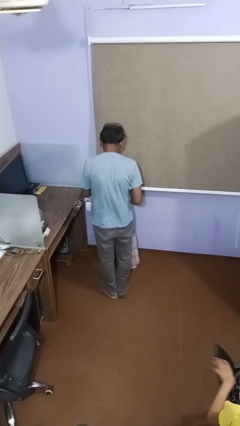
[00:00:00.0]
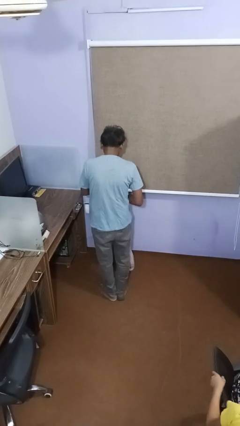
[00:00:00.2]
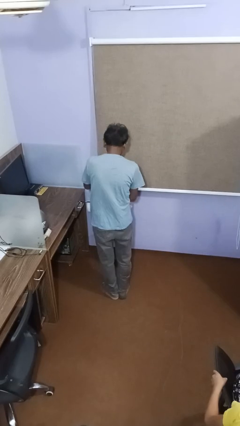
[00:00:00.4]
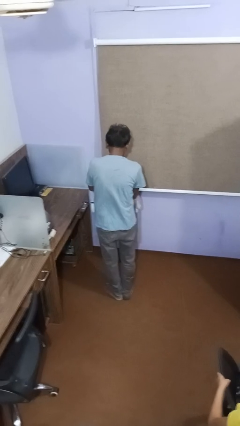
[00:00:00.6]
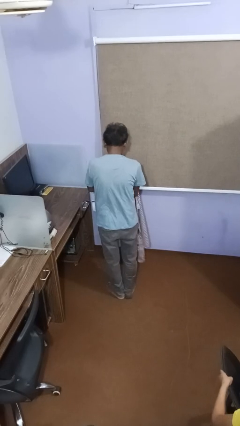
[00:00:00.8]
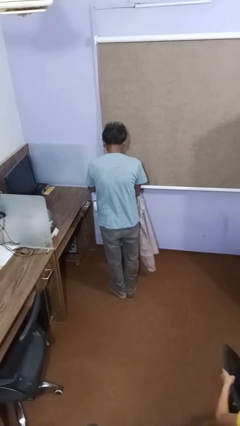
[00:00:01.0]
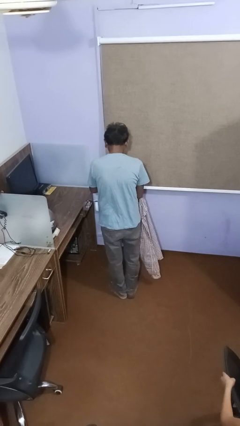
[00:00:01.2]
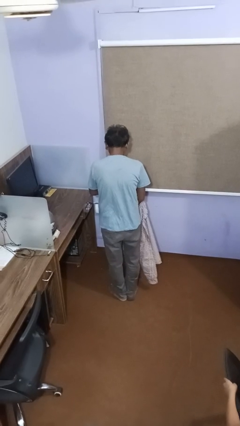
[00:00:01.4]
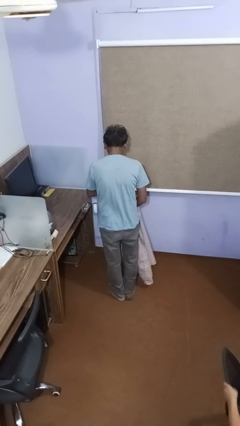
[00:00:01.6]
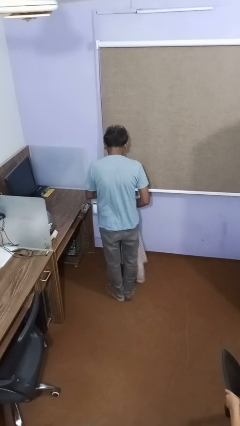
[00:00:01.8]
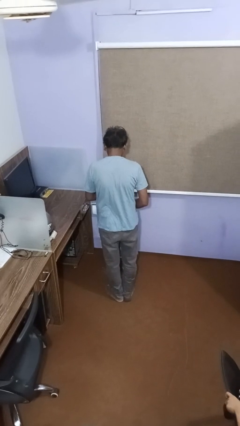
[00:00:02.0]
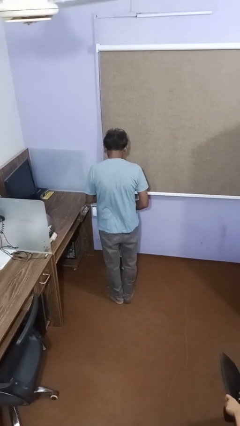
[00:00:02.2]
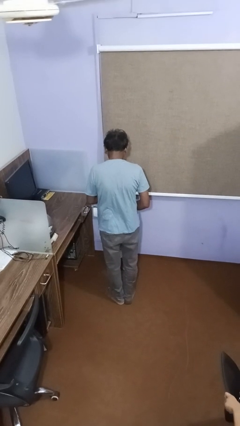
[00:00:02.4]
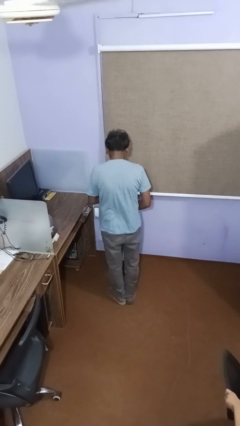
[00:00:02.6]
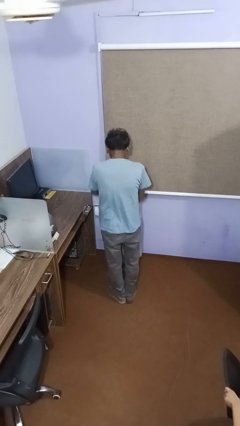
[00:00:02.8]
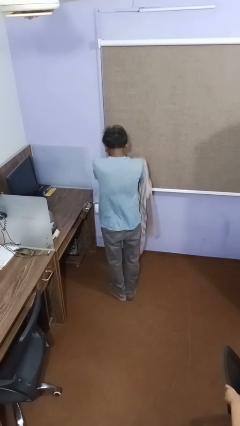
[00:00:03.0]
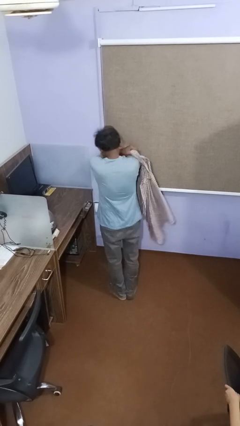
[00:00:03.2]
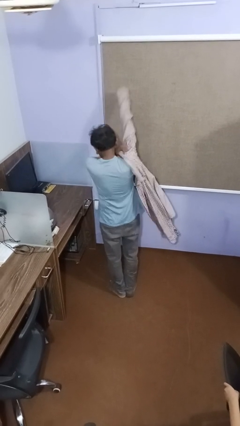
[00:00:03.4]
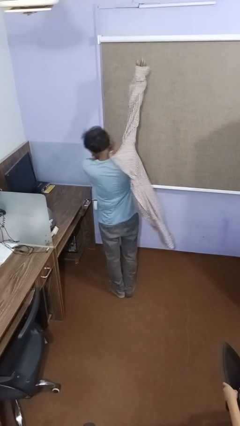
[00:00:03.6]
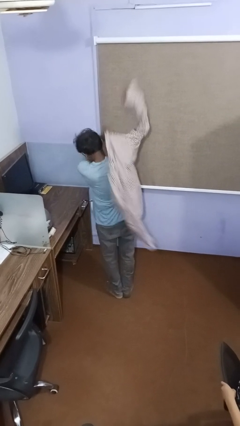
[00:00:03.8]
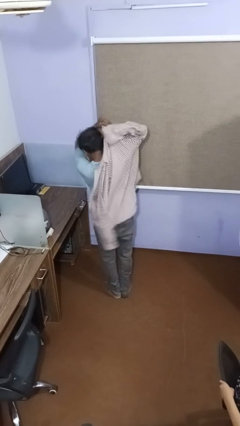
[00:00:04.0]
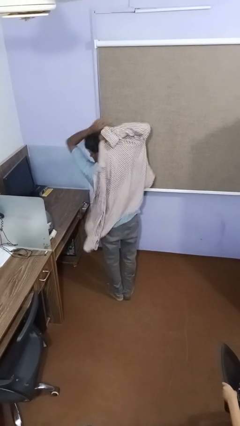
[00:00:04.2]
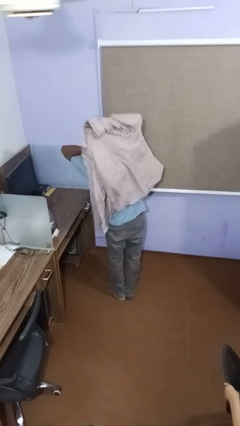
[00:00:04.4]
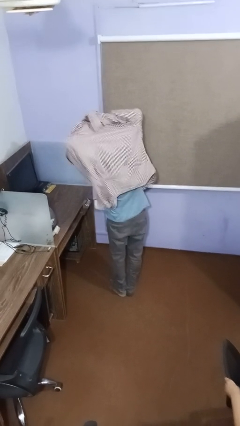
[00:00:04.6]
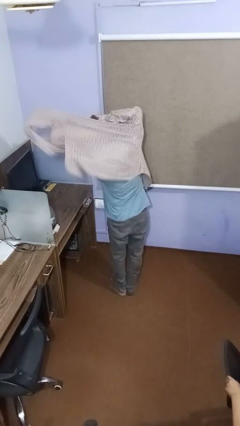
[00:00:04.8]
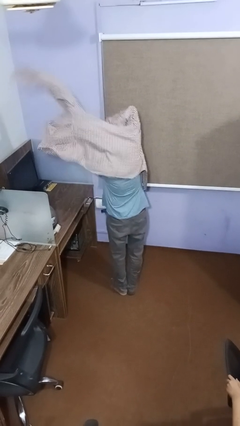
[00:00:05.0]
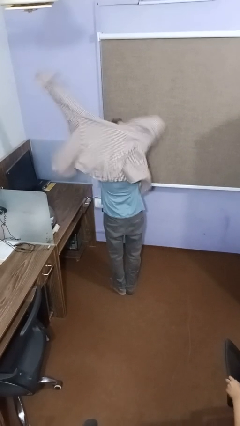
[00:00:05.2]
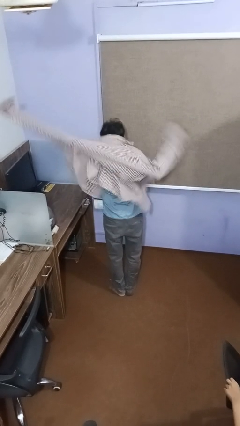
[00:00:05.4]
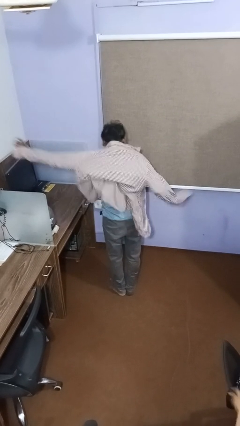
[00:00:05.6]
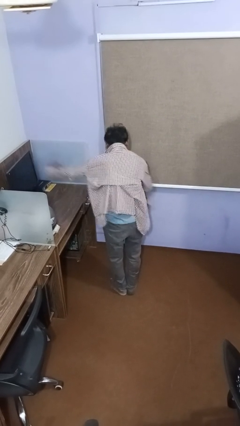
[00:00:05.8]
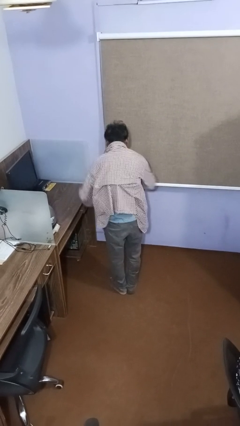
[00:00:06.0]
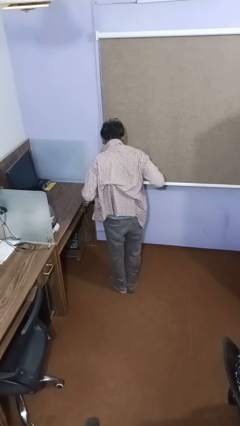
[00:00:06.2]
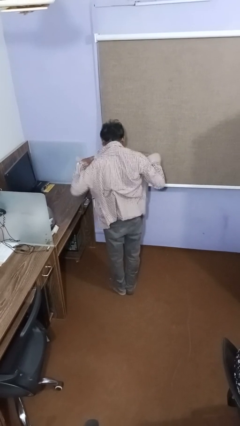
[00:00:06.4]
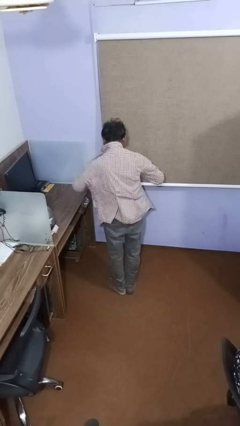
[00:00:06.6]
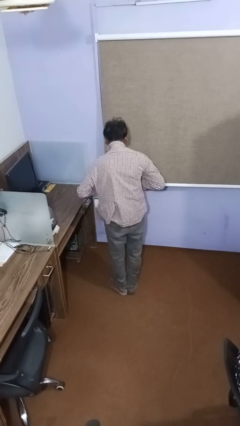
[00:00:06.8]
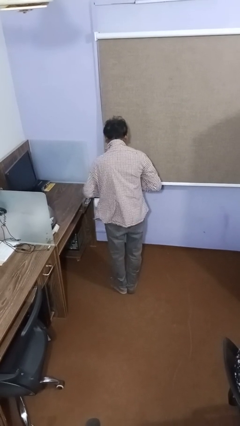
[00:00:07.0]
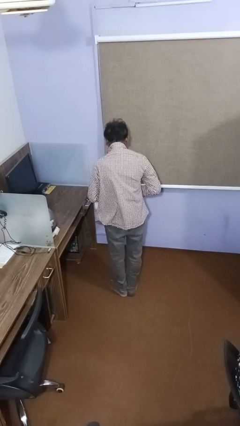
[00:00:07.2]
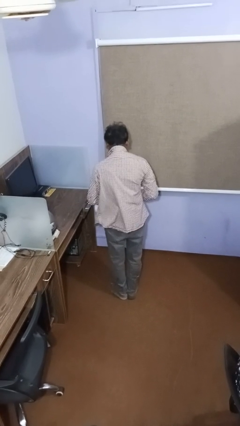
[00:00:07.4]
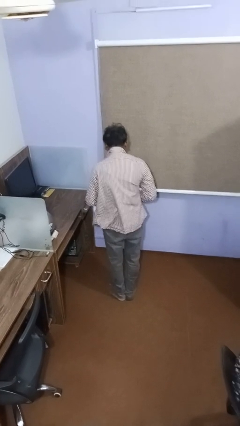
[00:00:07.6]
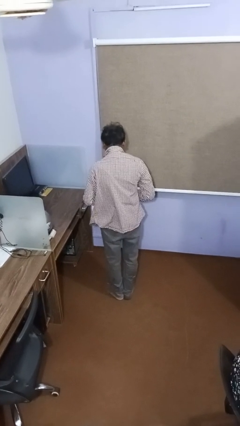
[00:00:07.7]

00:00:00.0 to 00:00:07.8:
person puts on shirt

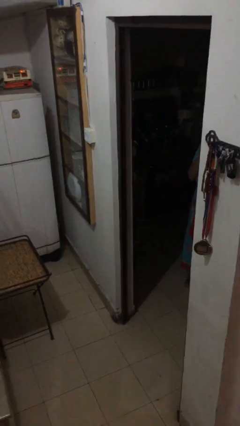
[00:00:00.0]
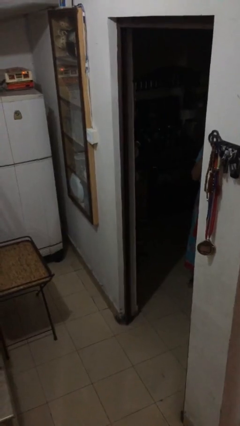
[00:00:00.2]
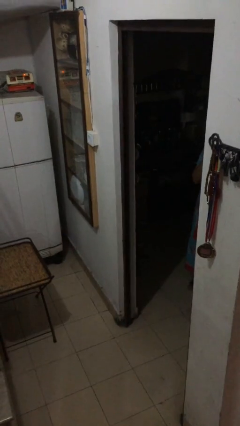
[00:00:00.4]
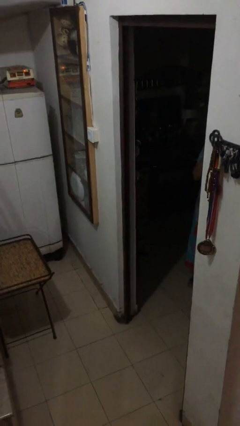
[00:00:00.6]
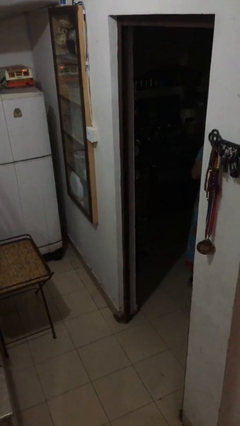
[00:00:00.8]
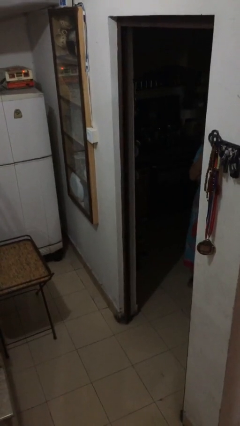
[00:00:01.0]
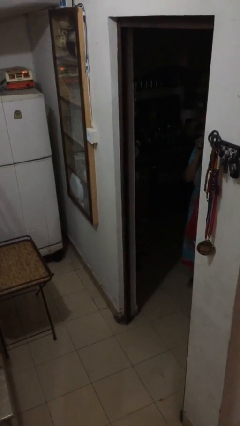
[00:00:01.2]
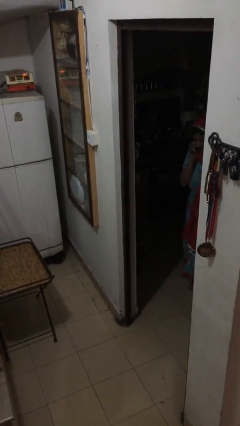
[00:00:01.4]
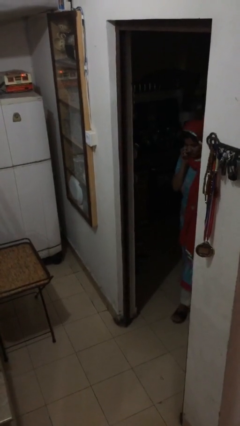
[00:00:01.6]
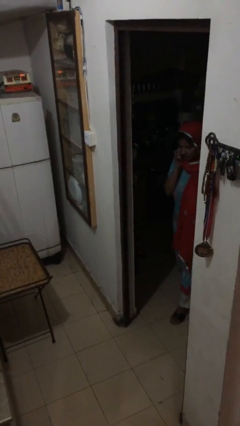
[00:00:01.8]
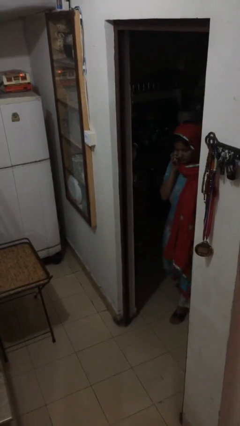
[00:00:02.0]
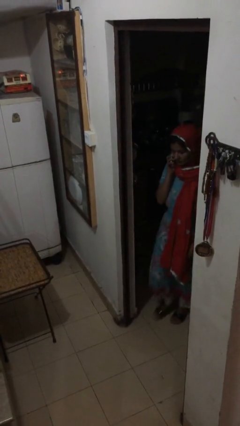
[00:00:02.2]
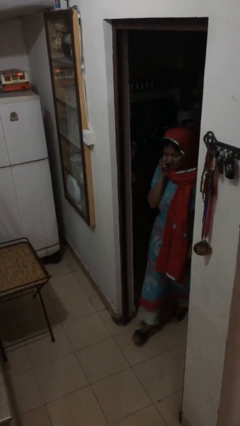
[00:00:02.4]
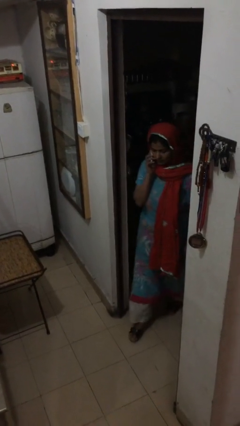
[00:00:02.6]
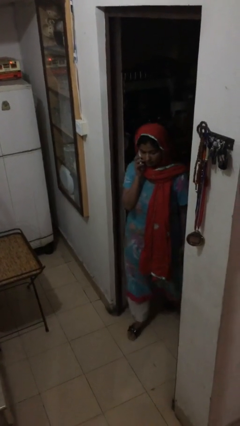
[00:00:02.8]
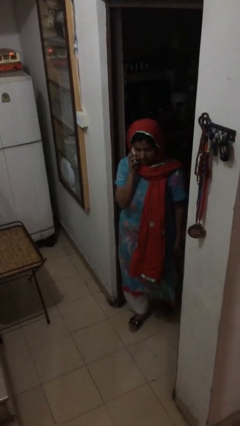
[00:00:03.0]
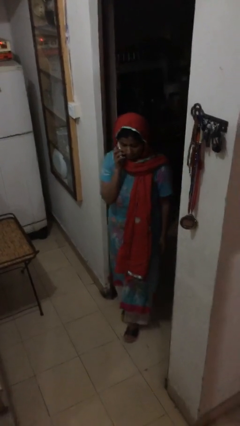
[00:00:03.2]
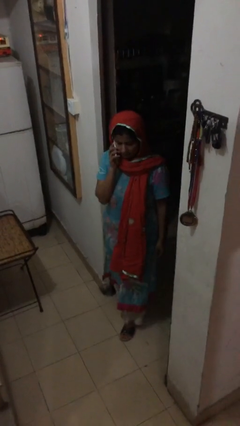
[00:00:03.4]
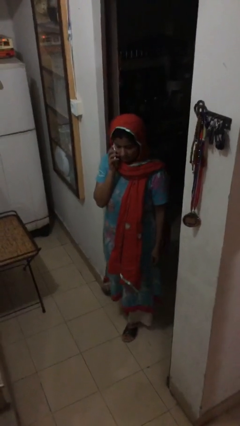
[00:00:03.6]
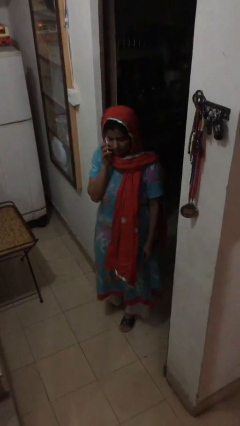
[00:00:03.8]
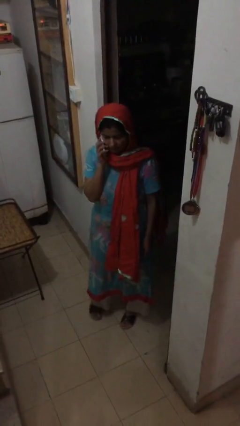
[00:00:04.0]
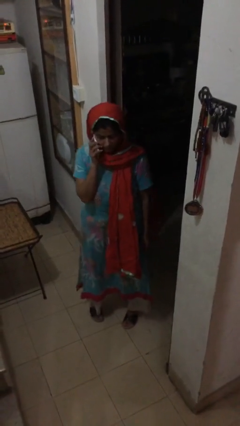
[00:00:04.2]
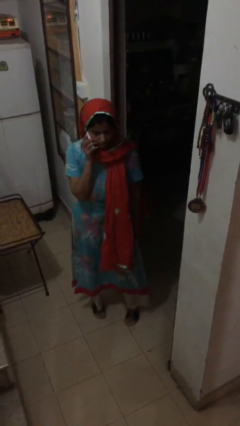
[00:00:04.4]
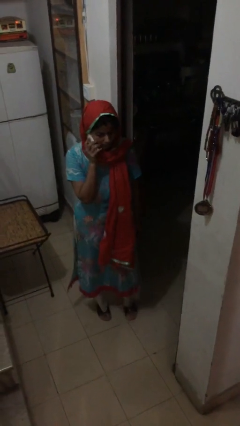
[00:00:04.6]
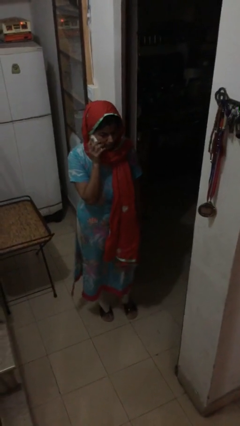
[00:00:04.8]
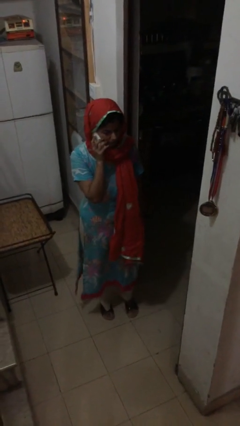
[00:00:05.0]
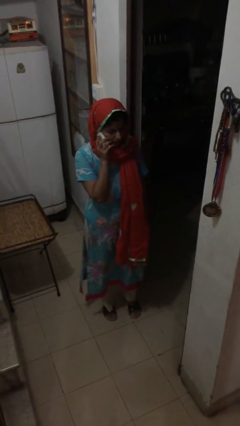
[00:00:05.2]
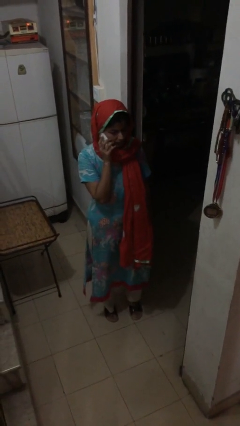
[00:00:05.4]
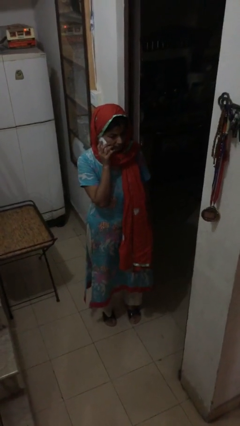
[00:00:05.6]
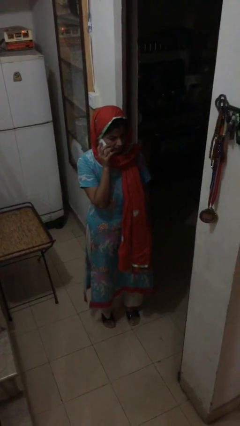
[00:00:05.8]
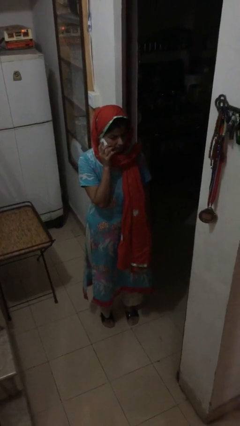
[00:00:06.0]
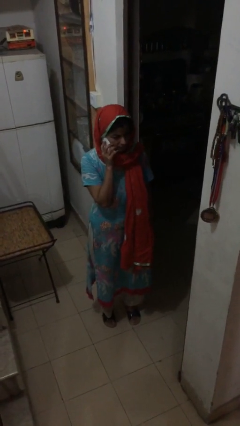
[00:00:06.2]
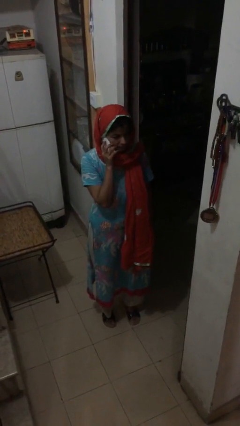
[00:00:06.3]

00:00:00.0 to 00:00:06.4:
person enters scene through structure

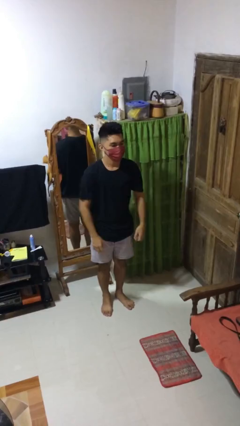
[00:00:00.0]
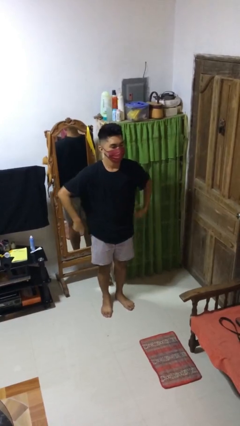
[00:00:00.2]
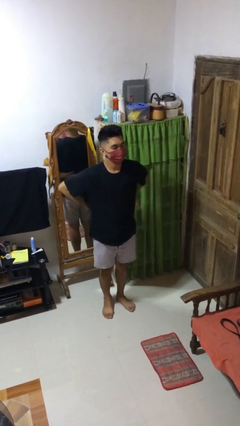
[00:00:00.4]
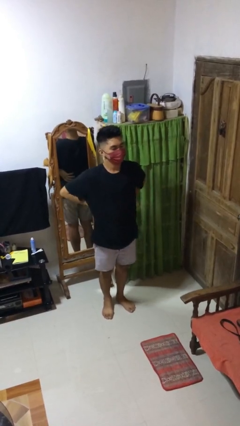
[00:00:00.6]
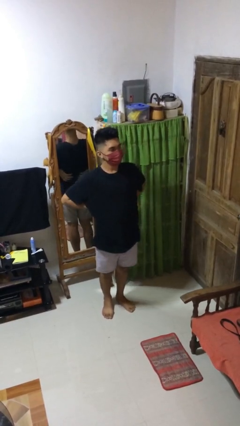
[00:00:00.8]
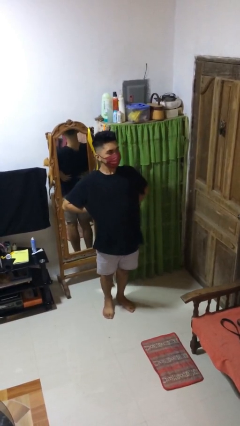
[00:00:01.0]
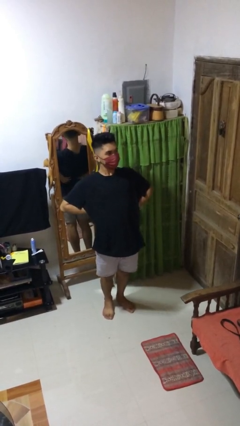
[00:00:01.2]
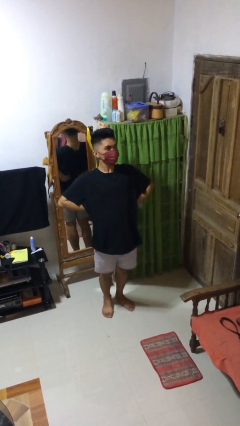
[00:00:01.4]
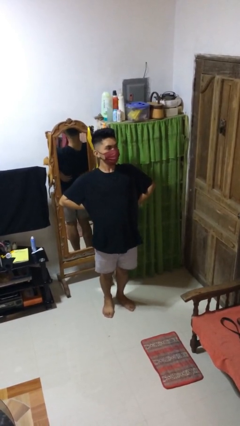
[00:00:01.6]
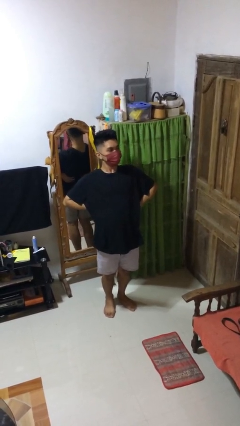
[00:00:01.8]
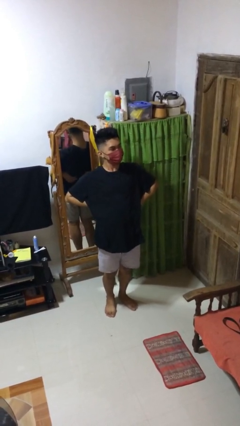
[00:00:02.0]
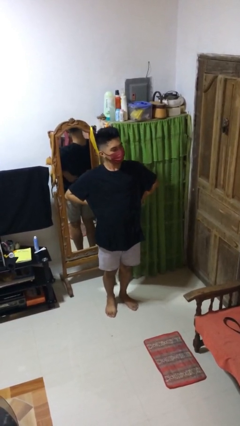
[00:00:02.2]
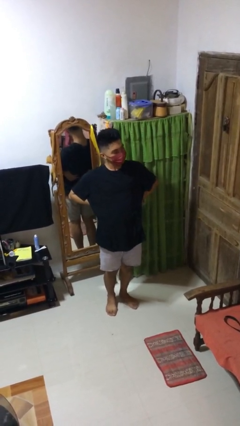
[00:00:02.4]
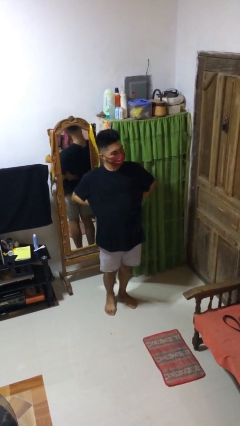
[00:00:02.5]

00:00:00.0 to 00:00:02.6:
person stretches back

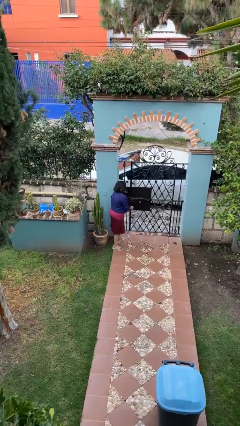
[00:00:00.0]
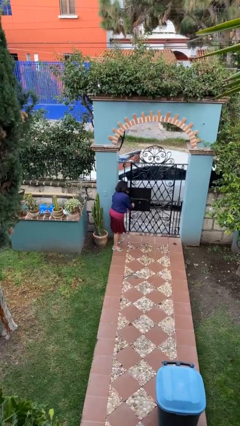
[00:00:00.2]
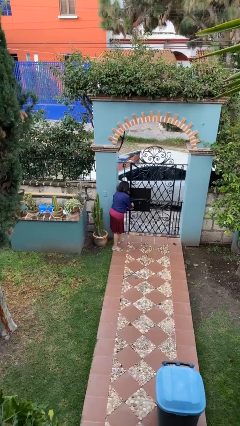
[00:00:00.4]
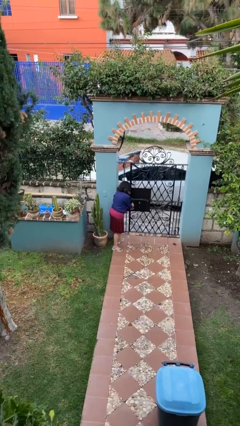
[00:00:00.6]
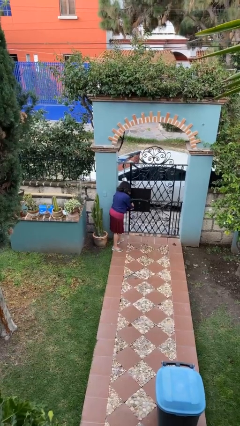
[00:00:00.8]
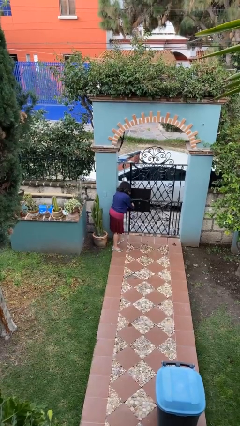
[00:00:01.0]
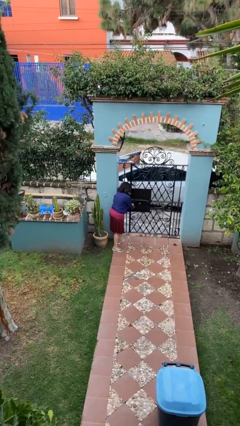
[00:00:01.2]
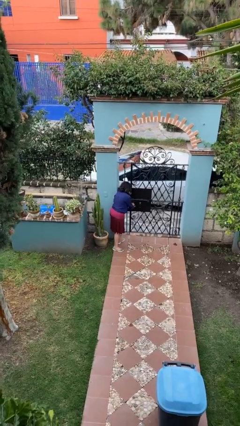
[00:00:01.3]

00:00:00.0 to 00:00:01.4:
person unlocks door with keys
